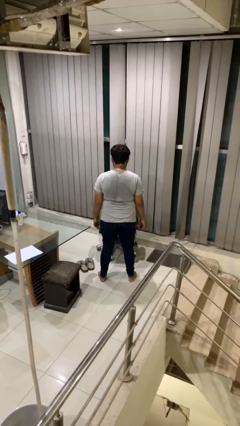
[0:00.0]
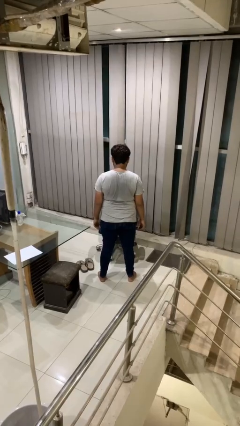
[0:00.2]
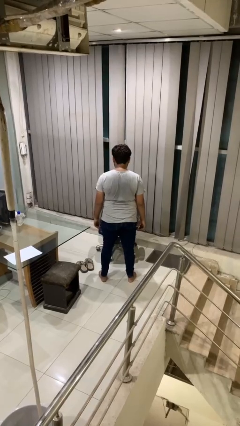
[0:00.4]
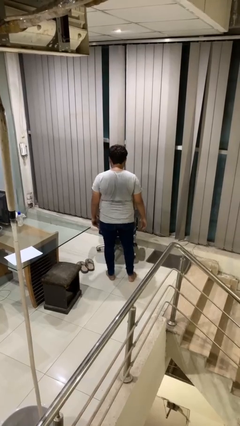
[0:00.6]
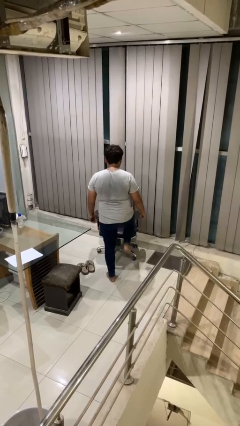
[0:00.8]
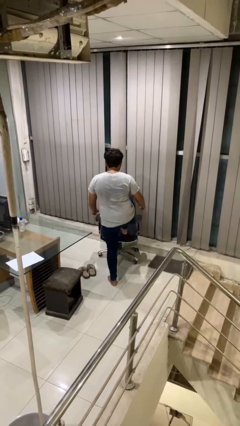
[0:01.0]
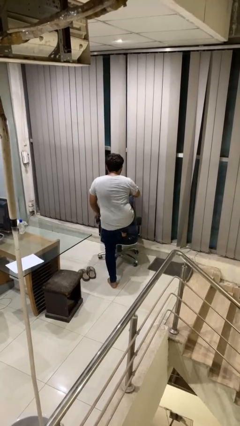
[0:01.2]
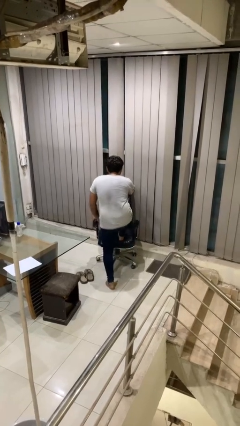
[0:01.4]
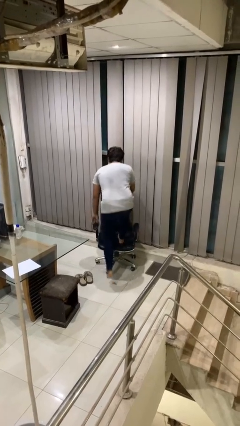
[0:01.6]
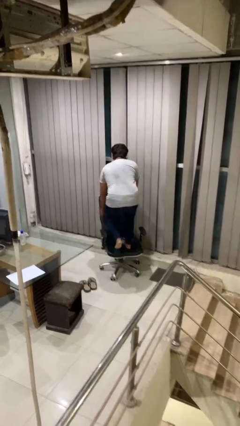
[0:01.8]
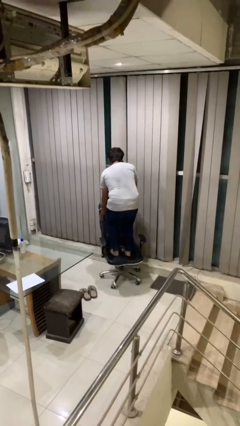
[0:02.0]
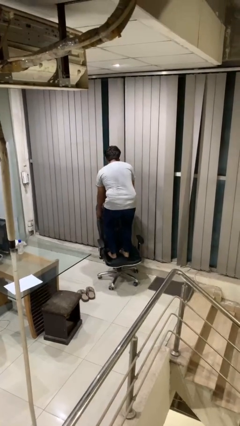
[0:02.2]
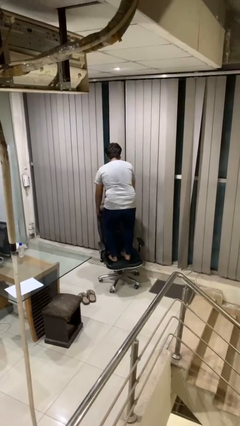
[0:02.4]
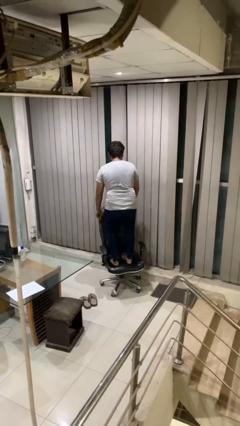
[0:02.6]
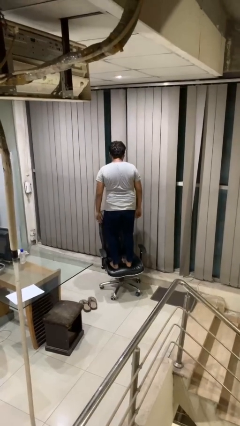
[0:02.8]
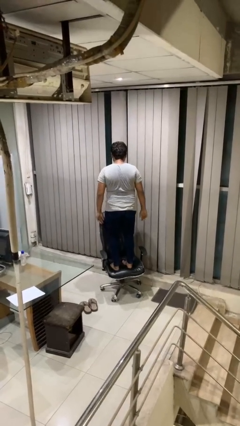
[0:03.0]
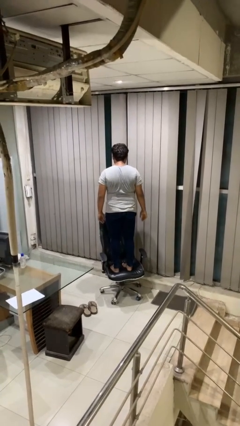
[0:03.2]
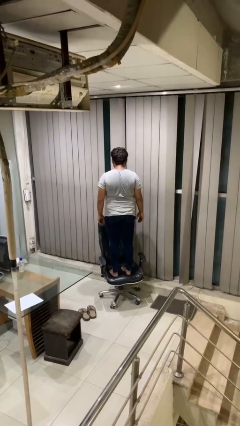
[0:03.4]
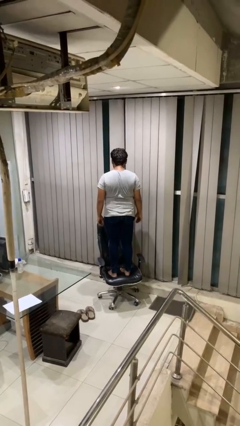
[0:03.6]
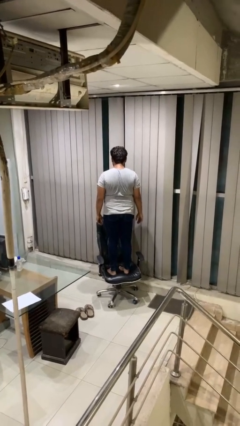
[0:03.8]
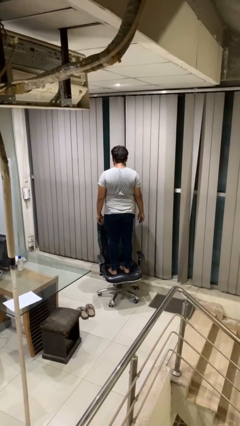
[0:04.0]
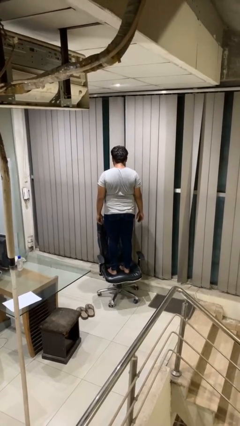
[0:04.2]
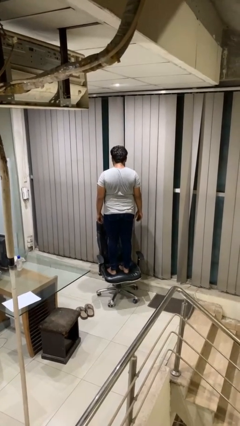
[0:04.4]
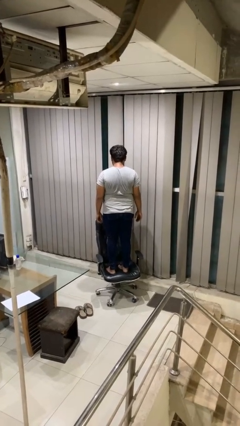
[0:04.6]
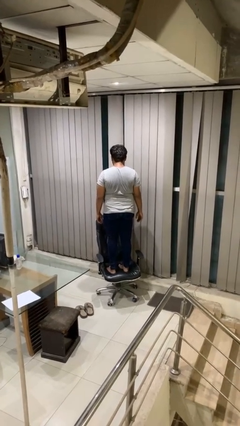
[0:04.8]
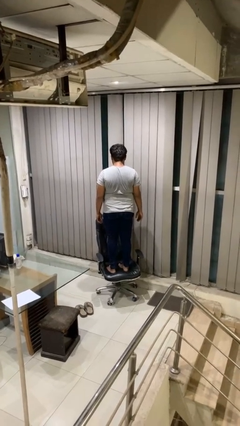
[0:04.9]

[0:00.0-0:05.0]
person climbs on chair

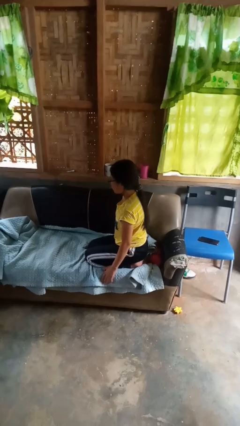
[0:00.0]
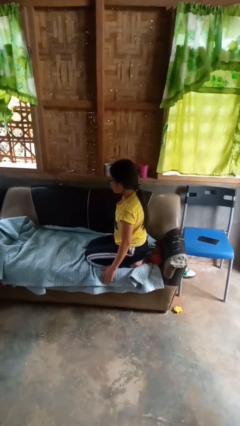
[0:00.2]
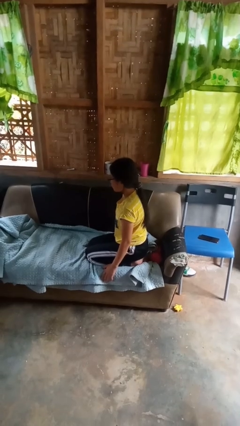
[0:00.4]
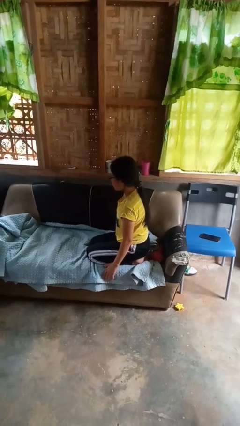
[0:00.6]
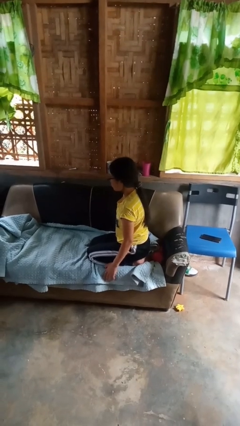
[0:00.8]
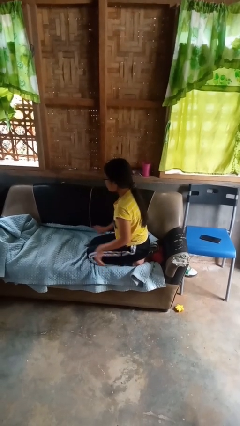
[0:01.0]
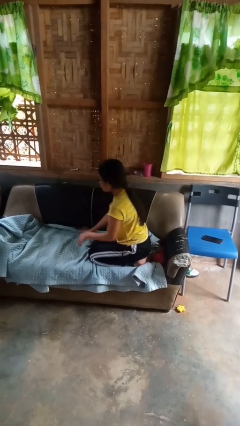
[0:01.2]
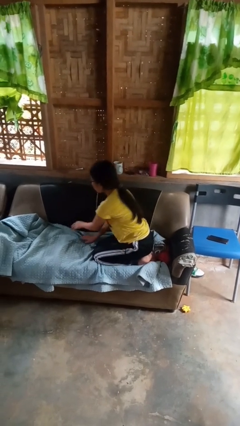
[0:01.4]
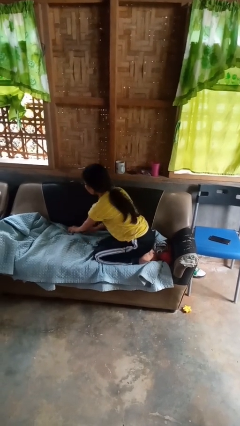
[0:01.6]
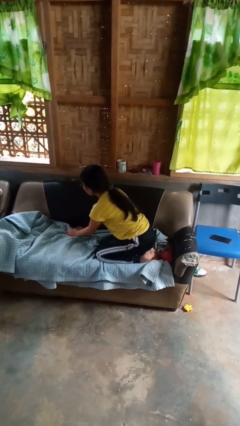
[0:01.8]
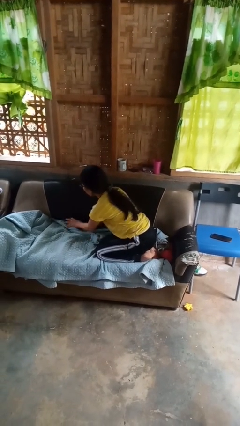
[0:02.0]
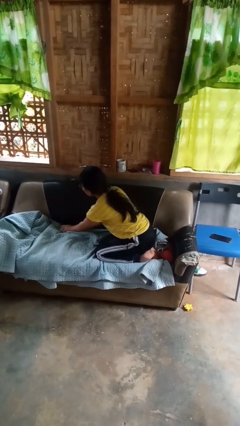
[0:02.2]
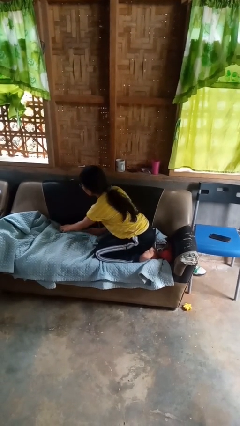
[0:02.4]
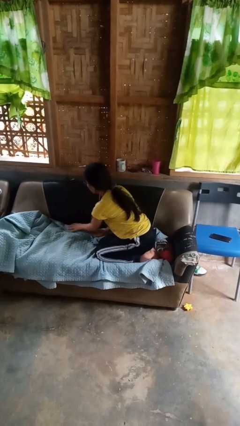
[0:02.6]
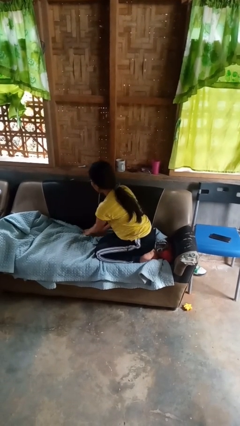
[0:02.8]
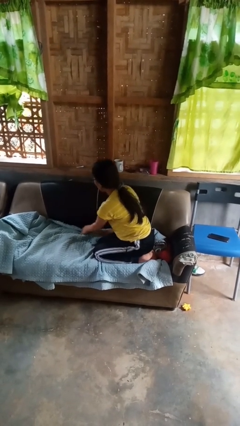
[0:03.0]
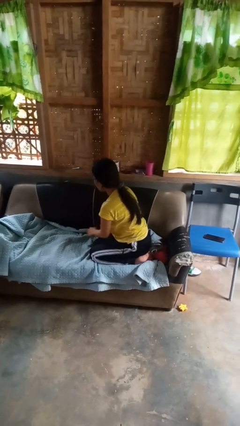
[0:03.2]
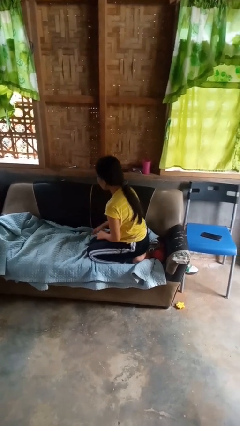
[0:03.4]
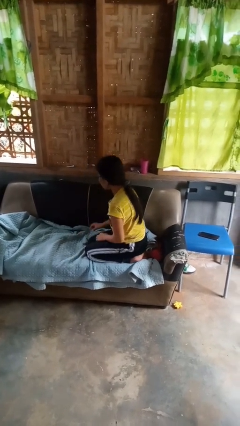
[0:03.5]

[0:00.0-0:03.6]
person searches in couch

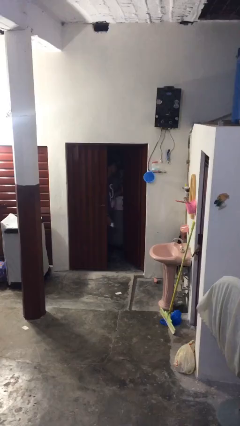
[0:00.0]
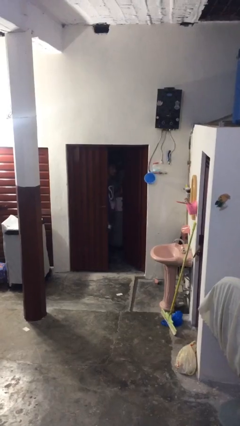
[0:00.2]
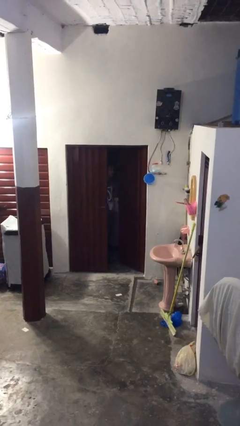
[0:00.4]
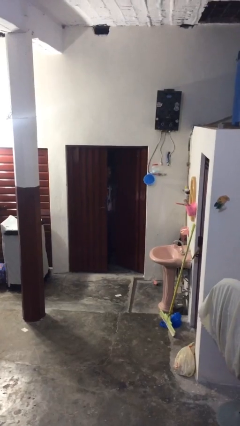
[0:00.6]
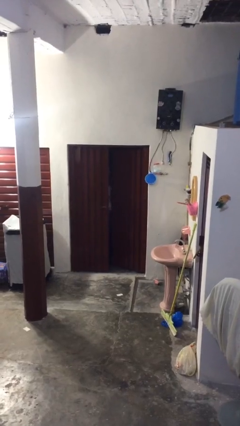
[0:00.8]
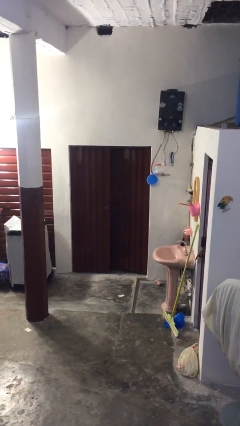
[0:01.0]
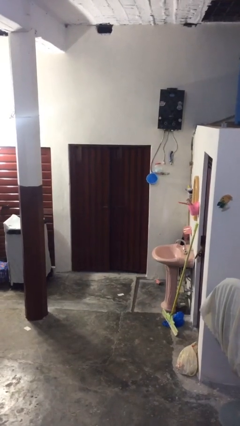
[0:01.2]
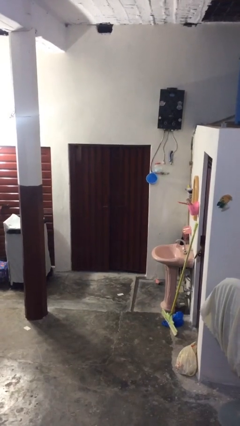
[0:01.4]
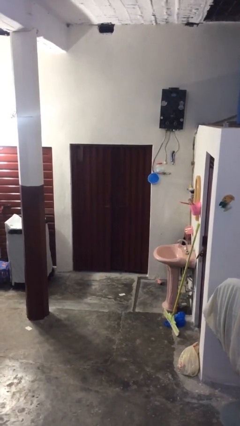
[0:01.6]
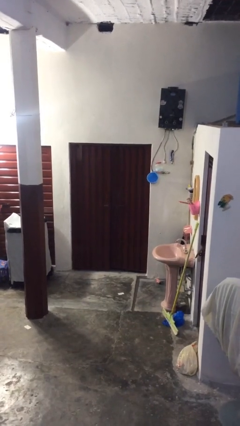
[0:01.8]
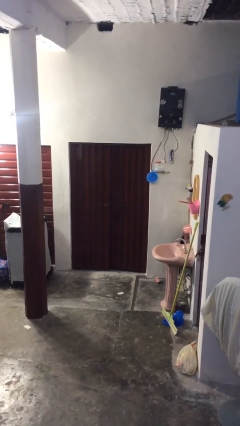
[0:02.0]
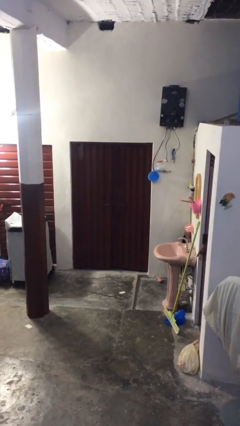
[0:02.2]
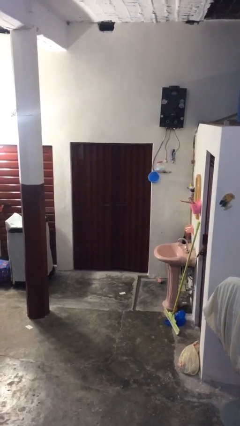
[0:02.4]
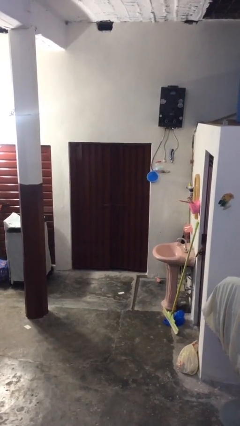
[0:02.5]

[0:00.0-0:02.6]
person closes facility door

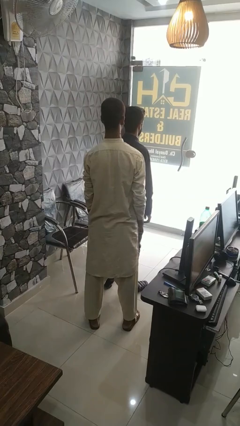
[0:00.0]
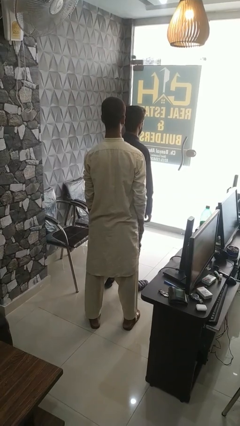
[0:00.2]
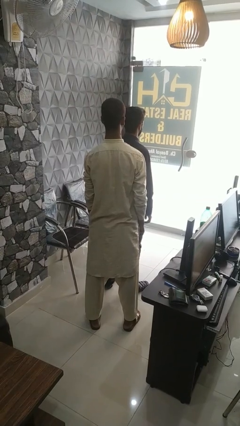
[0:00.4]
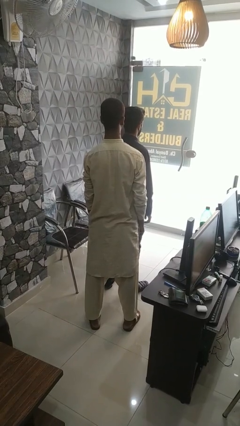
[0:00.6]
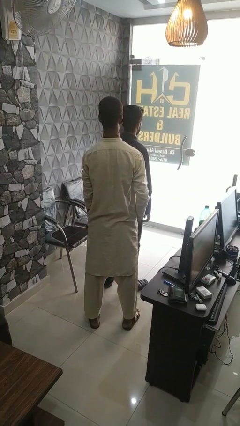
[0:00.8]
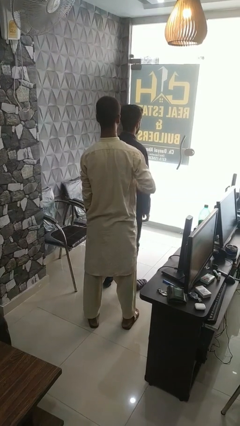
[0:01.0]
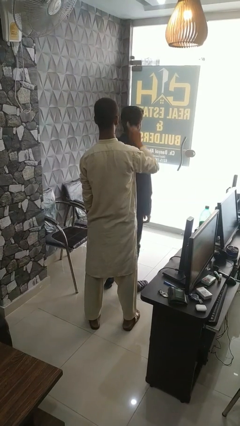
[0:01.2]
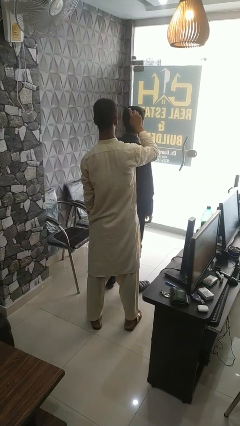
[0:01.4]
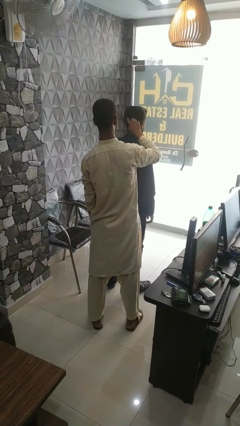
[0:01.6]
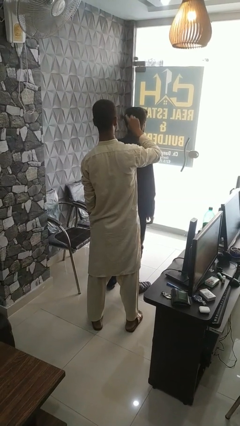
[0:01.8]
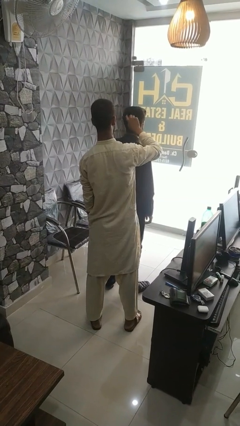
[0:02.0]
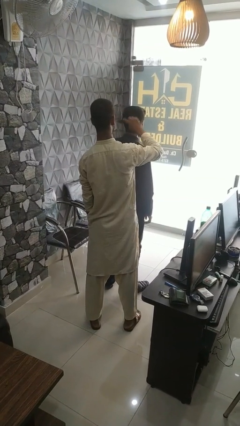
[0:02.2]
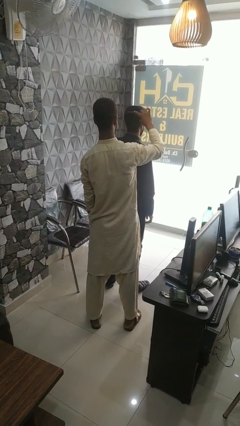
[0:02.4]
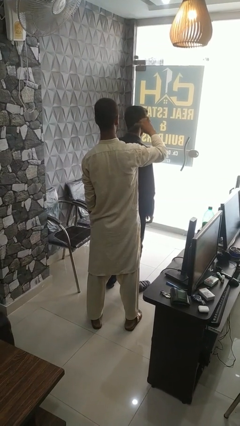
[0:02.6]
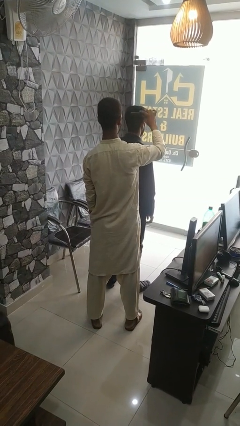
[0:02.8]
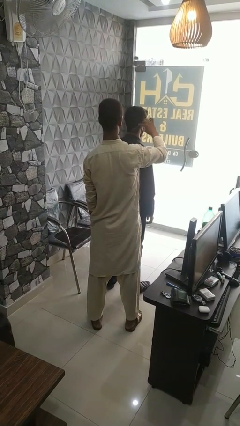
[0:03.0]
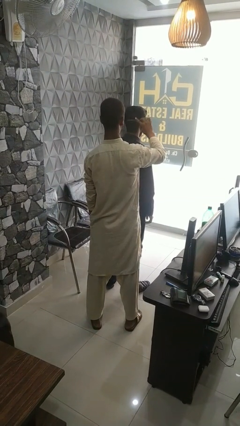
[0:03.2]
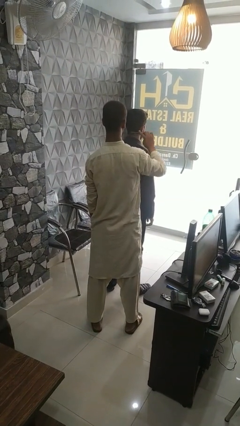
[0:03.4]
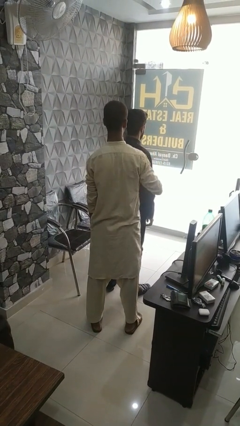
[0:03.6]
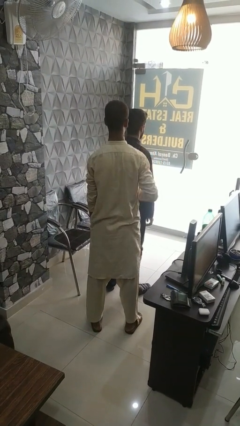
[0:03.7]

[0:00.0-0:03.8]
person brushes hair of person

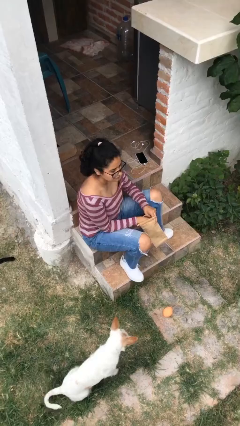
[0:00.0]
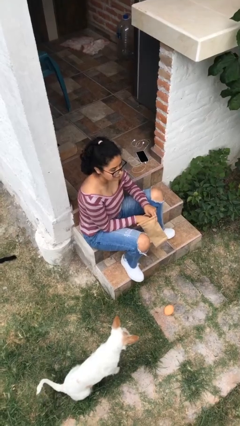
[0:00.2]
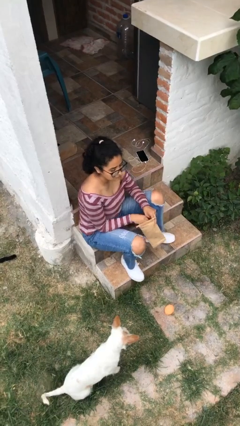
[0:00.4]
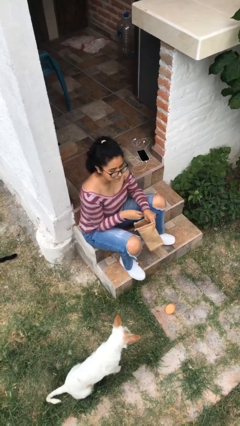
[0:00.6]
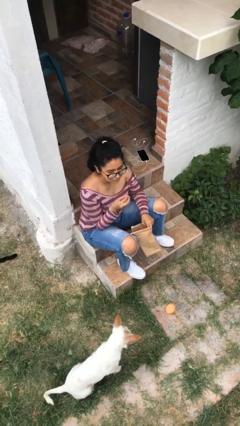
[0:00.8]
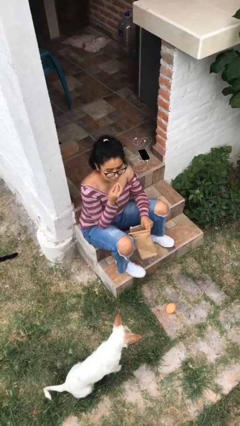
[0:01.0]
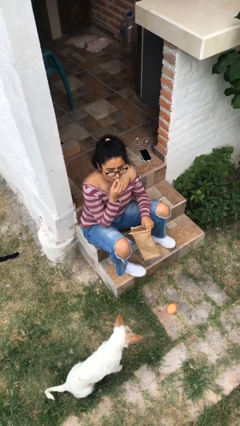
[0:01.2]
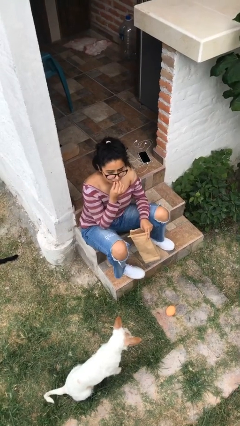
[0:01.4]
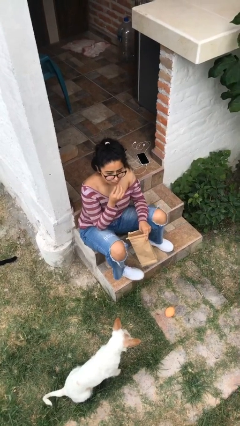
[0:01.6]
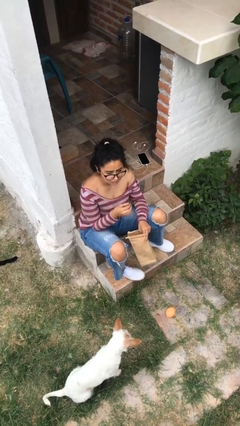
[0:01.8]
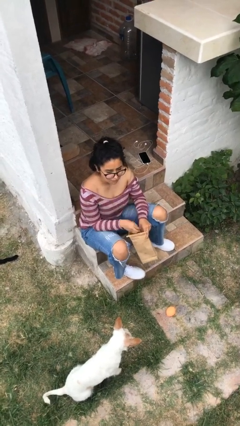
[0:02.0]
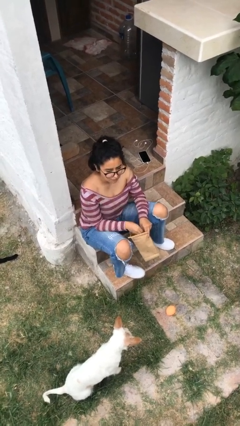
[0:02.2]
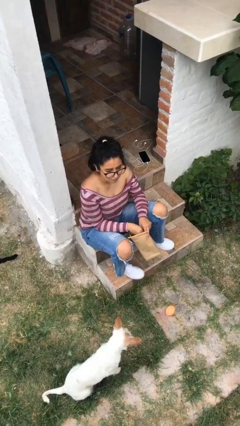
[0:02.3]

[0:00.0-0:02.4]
person eats snack from bag
